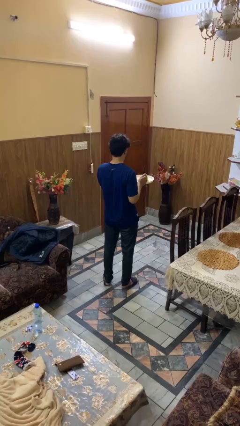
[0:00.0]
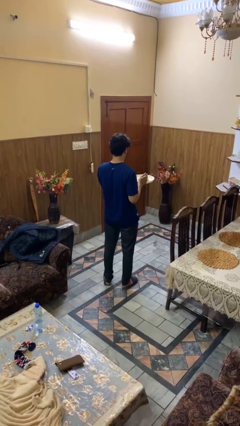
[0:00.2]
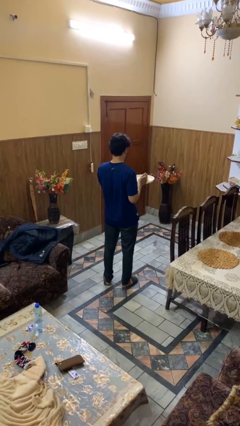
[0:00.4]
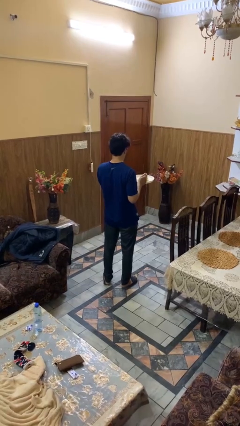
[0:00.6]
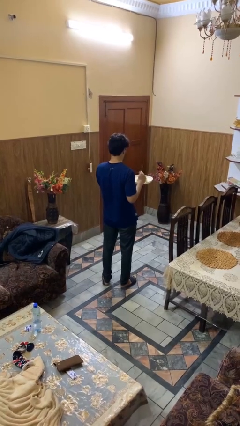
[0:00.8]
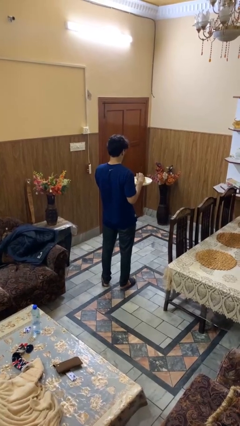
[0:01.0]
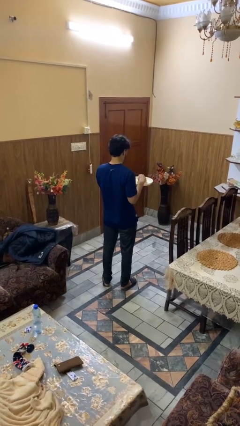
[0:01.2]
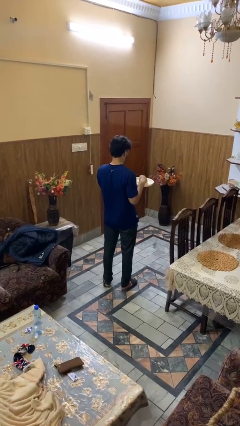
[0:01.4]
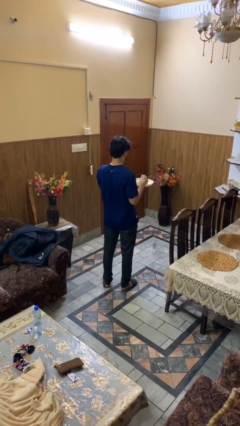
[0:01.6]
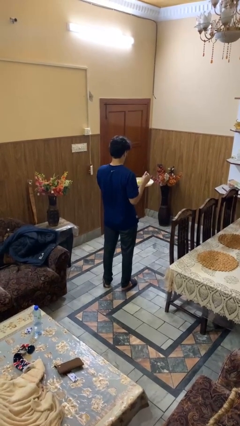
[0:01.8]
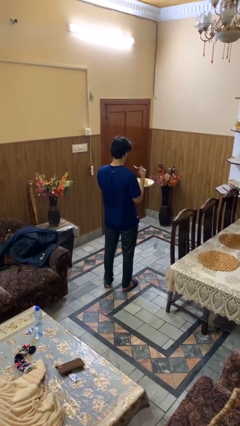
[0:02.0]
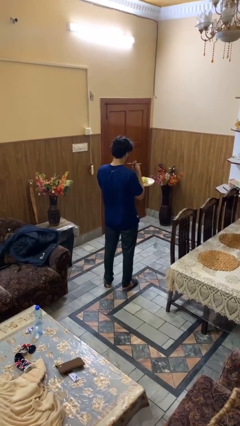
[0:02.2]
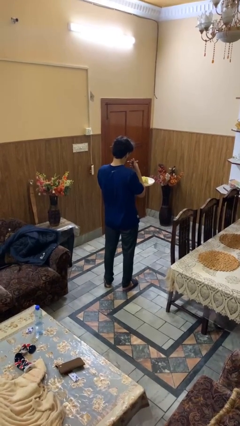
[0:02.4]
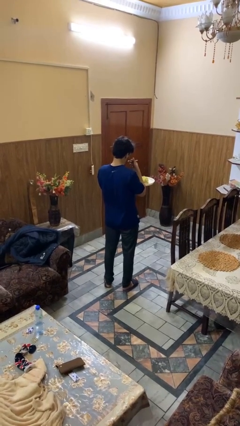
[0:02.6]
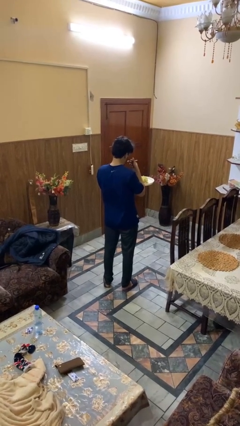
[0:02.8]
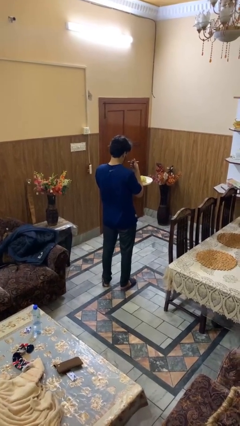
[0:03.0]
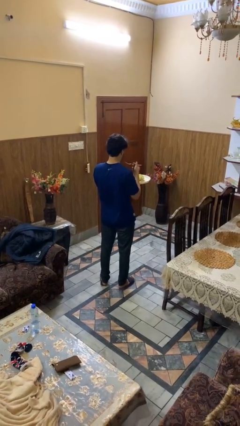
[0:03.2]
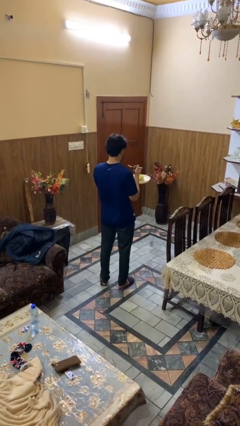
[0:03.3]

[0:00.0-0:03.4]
person eats with utensil

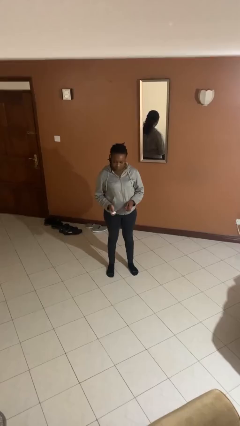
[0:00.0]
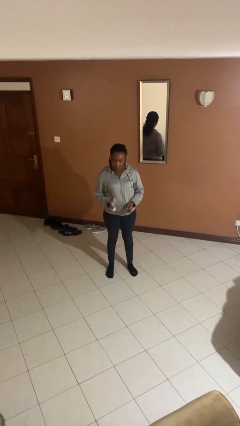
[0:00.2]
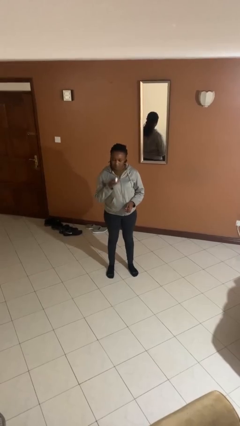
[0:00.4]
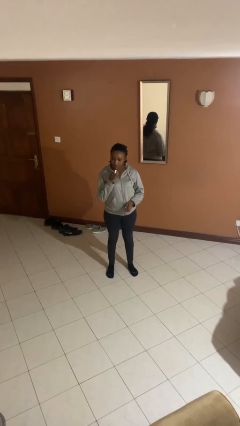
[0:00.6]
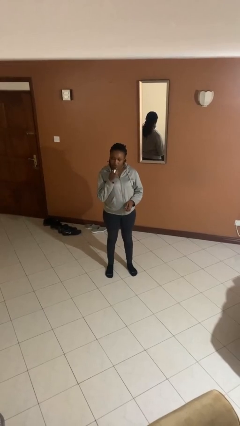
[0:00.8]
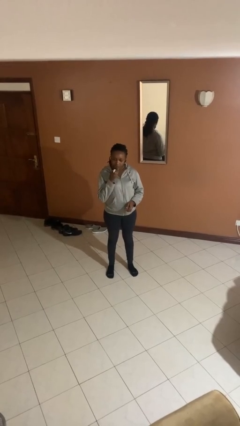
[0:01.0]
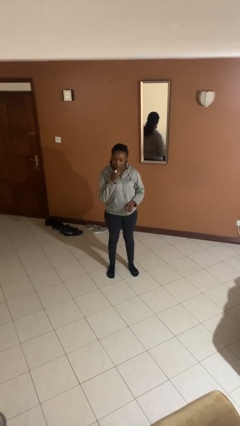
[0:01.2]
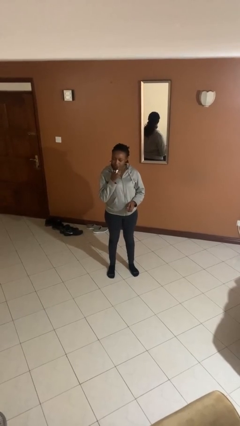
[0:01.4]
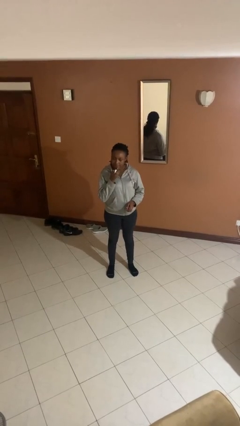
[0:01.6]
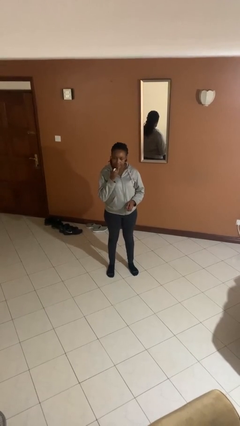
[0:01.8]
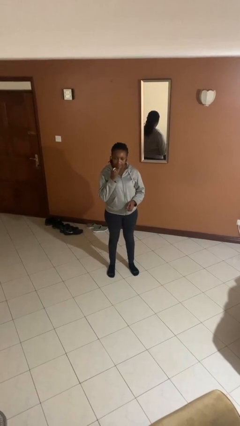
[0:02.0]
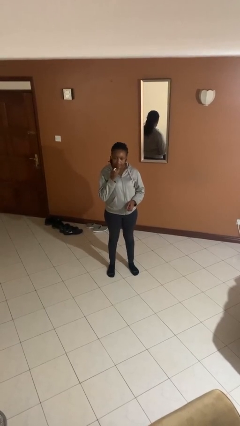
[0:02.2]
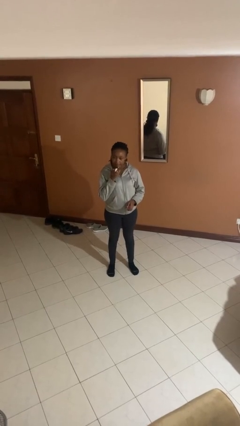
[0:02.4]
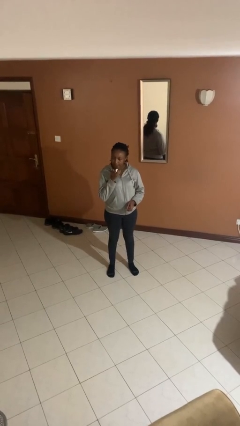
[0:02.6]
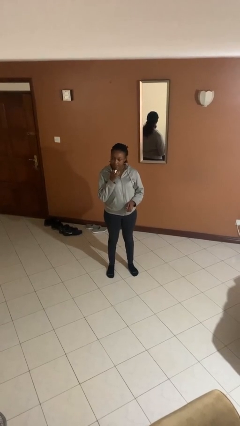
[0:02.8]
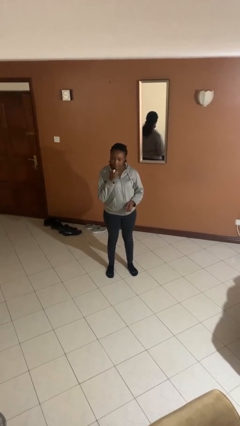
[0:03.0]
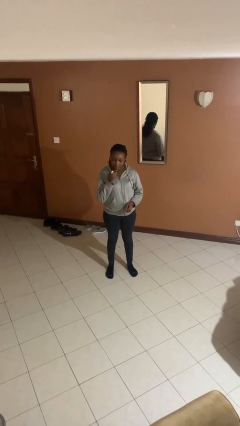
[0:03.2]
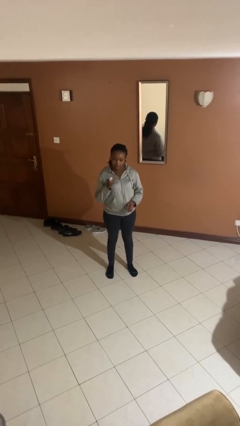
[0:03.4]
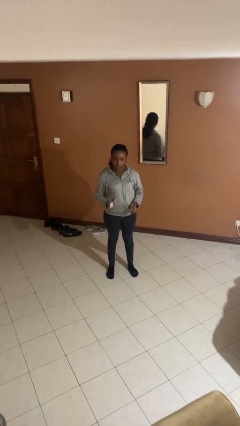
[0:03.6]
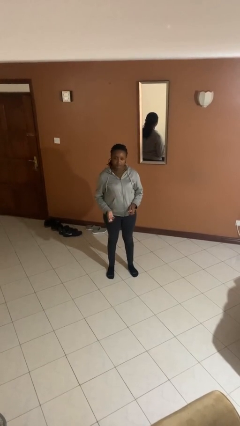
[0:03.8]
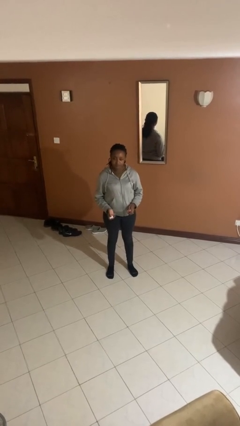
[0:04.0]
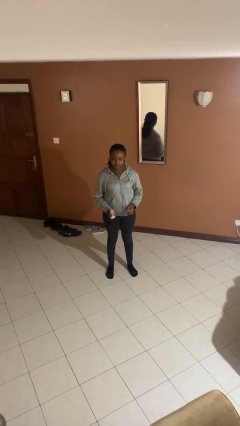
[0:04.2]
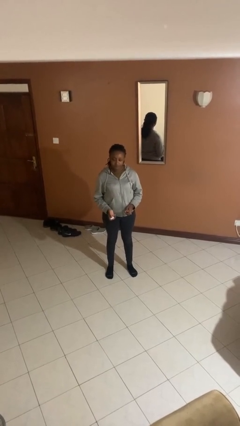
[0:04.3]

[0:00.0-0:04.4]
person applies lip makeup

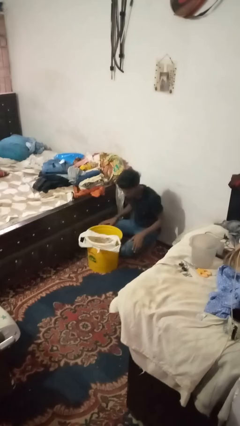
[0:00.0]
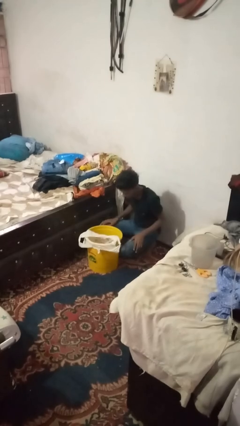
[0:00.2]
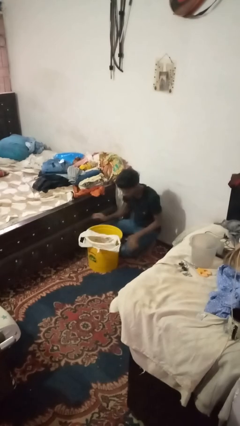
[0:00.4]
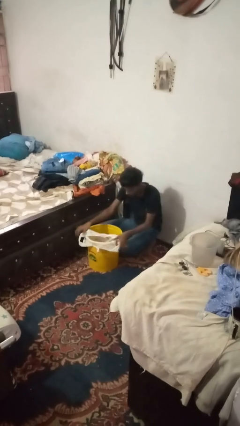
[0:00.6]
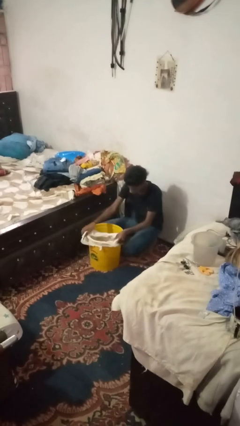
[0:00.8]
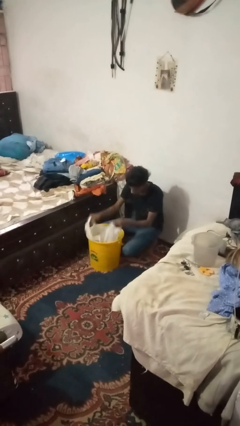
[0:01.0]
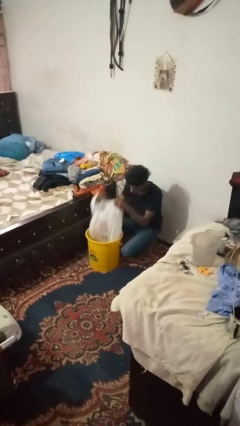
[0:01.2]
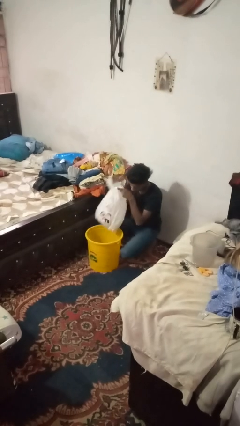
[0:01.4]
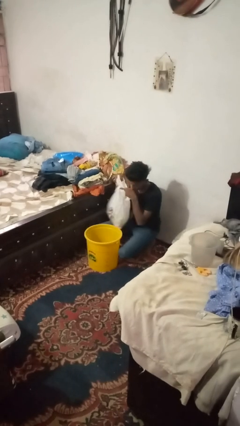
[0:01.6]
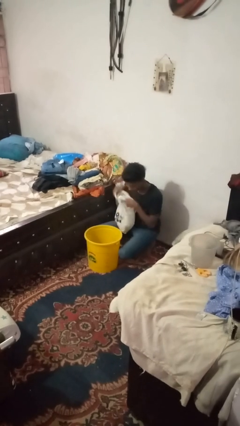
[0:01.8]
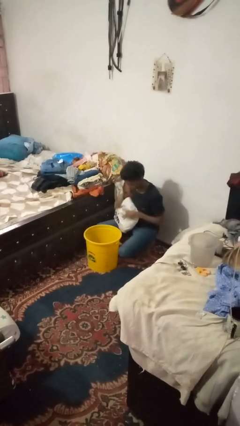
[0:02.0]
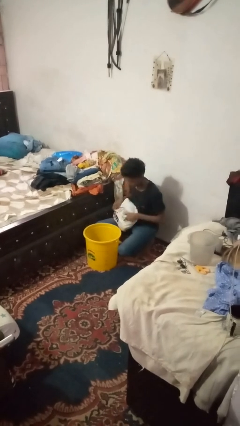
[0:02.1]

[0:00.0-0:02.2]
person removes trashbag from trashcan

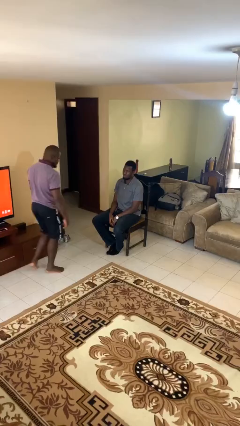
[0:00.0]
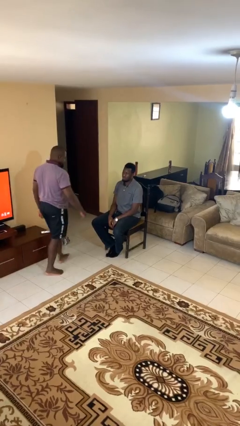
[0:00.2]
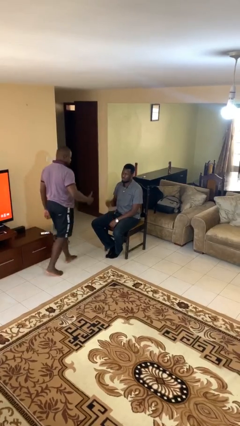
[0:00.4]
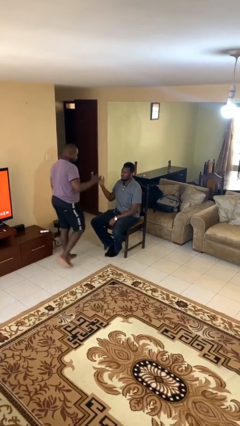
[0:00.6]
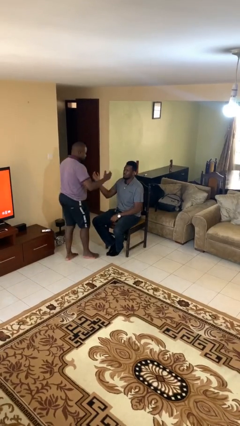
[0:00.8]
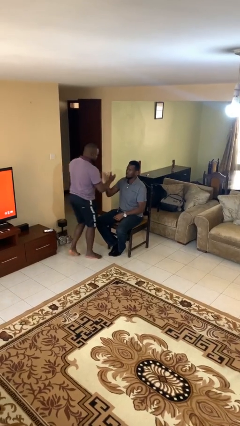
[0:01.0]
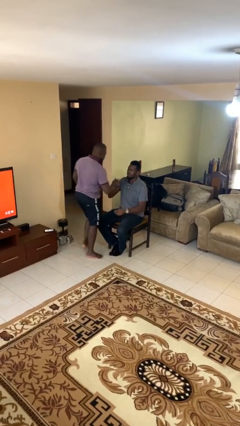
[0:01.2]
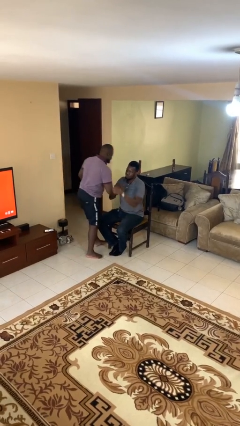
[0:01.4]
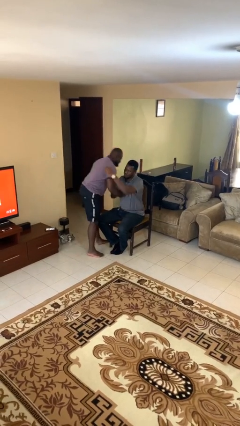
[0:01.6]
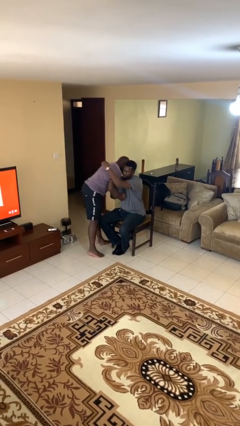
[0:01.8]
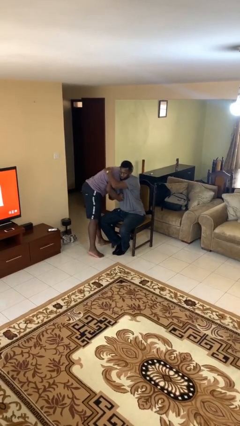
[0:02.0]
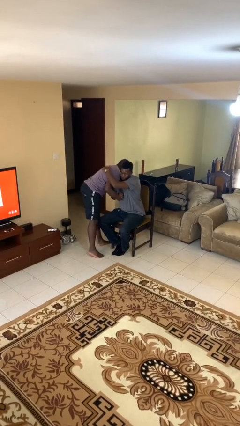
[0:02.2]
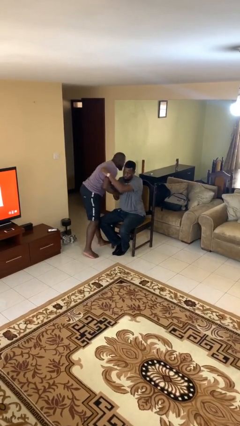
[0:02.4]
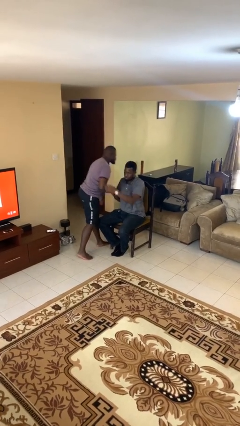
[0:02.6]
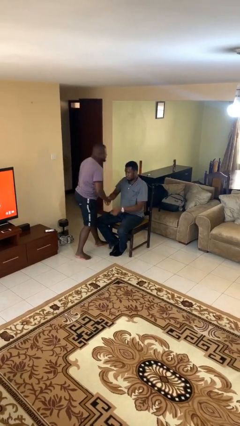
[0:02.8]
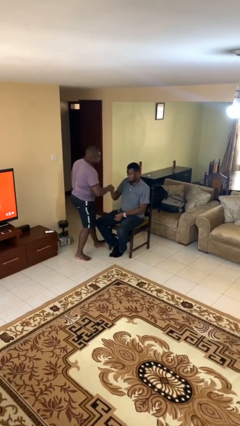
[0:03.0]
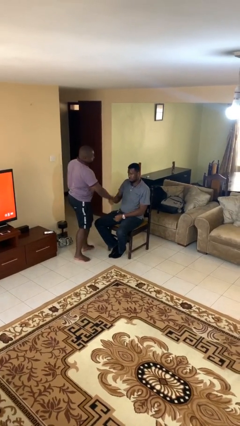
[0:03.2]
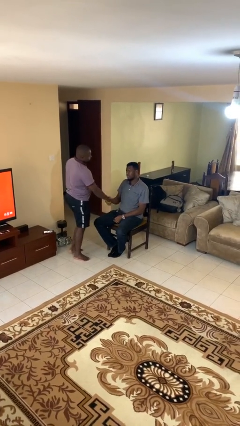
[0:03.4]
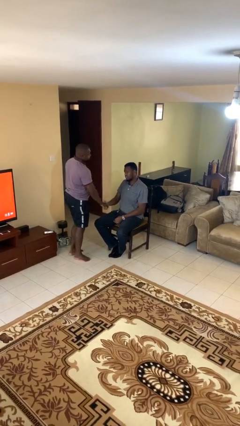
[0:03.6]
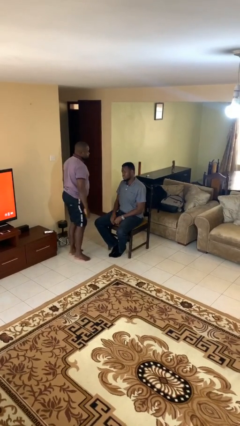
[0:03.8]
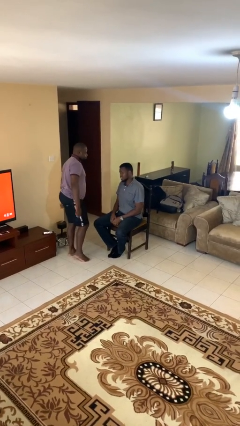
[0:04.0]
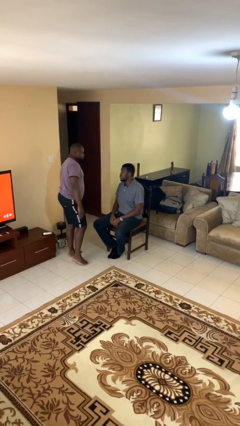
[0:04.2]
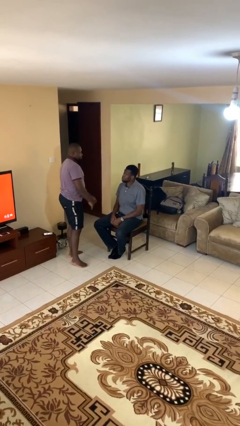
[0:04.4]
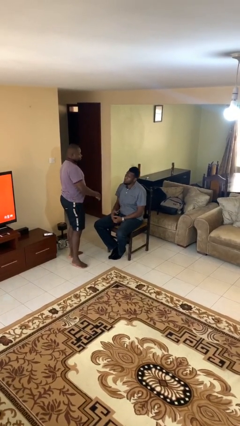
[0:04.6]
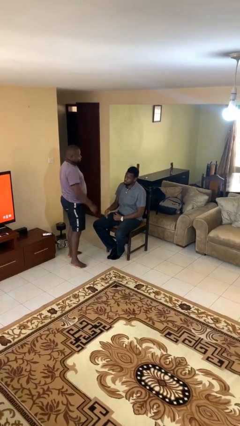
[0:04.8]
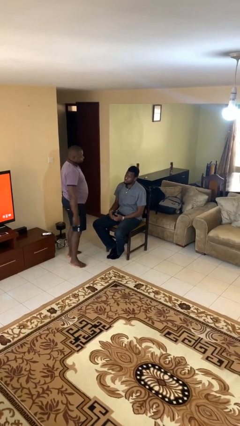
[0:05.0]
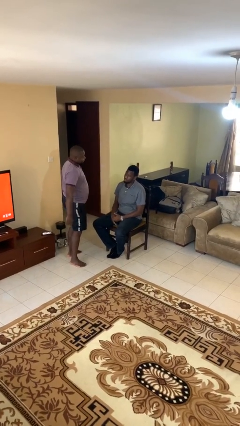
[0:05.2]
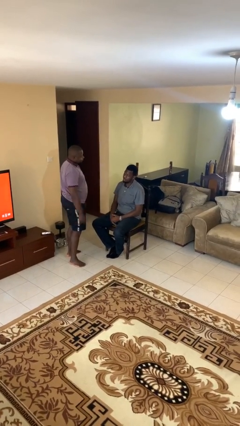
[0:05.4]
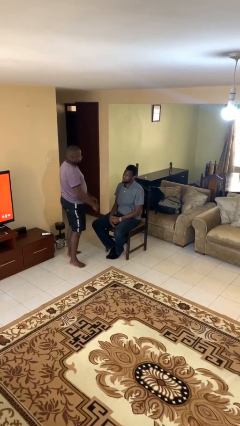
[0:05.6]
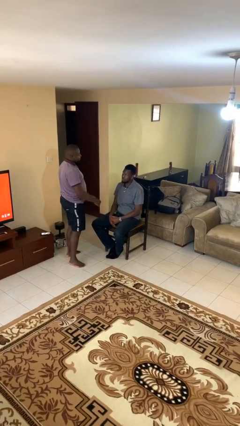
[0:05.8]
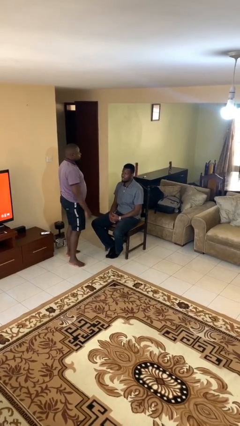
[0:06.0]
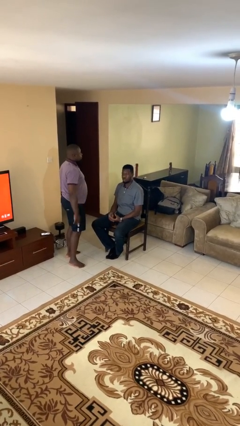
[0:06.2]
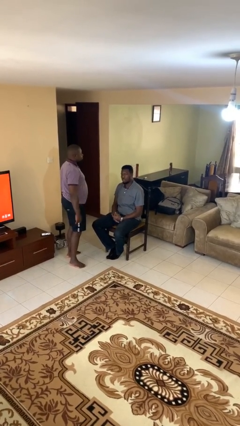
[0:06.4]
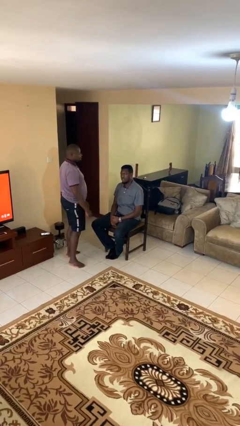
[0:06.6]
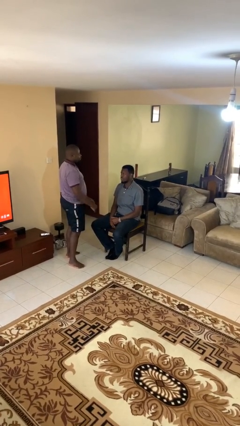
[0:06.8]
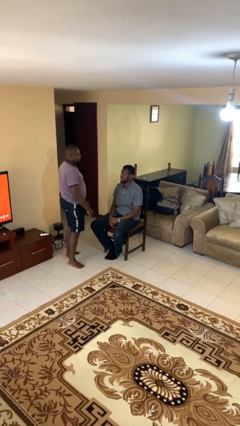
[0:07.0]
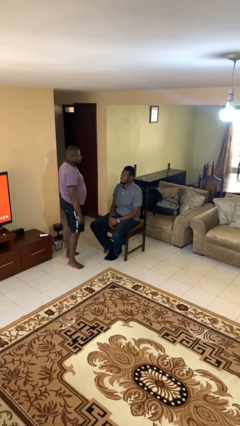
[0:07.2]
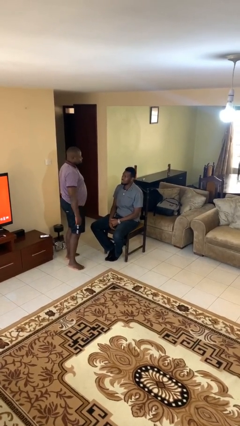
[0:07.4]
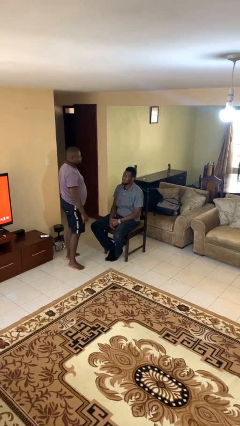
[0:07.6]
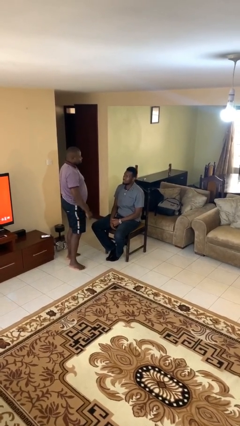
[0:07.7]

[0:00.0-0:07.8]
person embraces person
